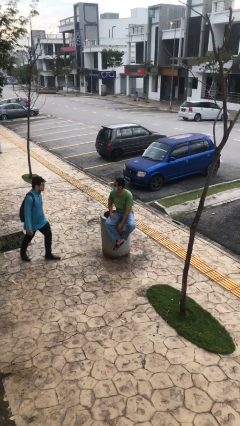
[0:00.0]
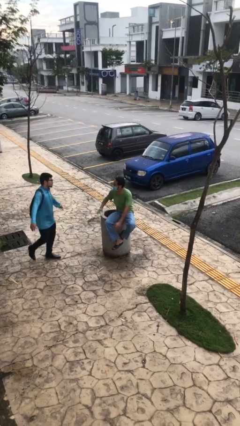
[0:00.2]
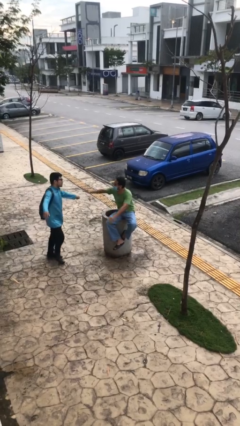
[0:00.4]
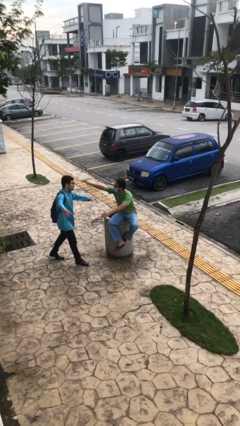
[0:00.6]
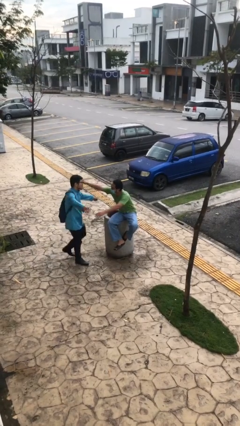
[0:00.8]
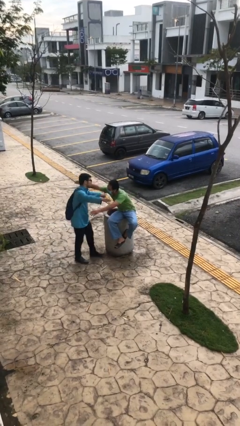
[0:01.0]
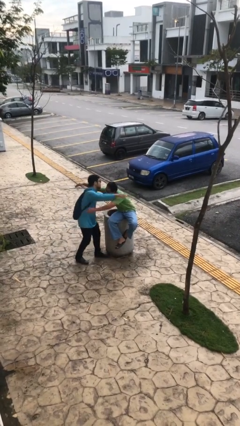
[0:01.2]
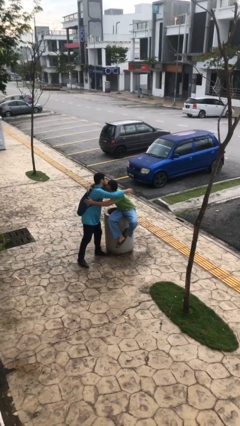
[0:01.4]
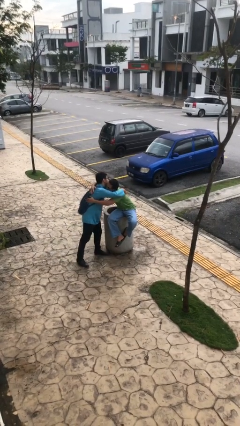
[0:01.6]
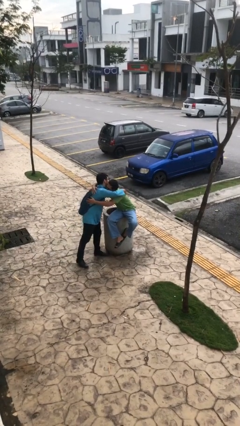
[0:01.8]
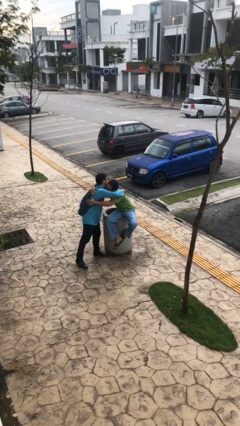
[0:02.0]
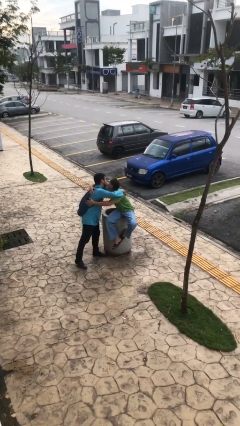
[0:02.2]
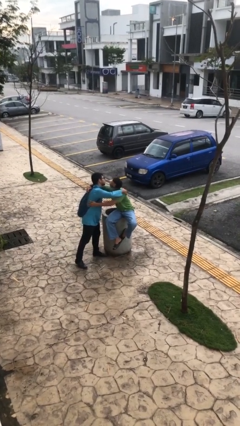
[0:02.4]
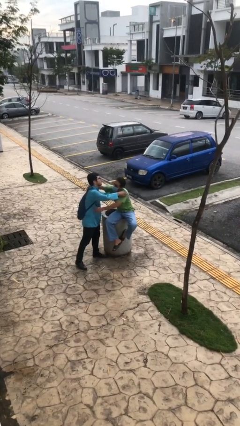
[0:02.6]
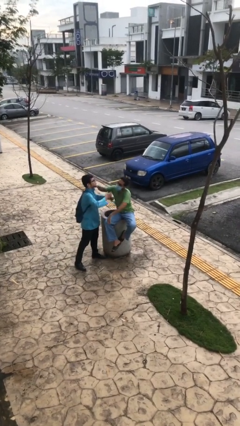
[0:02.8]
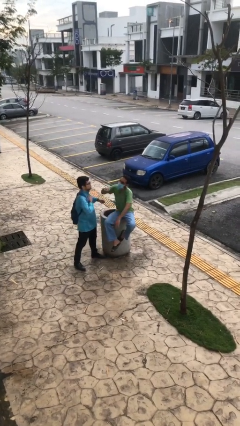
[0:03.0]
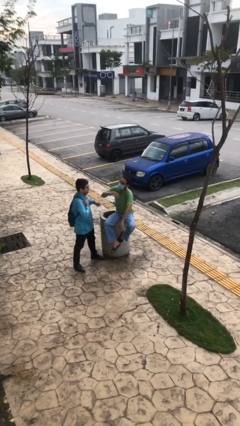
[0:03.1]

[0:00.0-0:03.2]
person embraces person

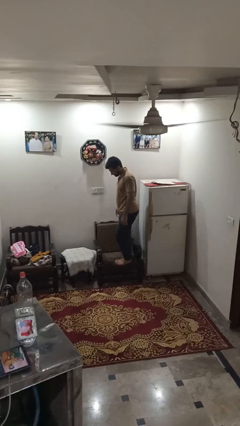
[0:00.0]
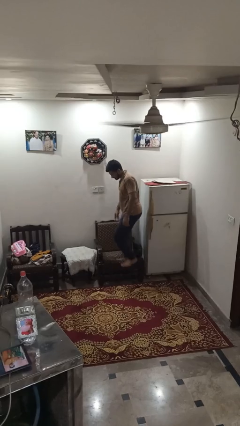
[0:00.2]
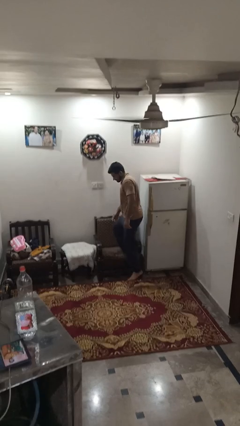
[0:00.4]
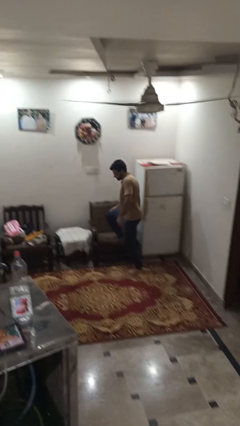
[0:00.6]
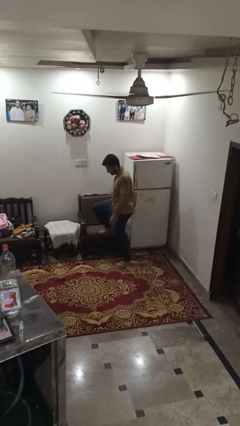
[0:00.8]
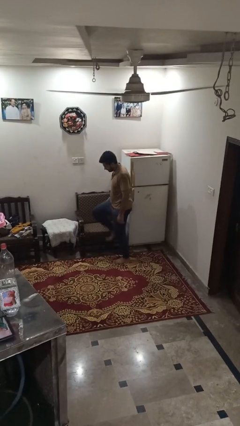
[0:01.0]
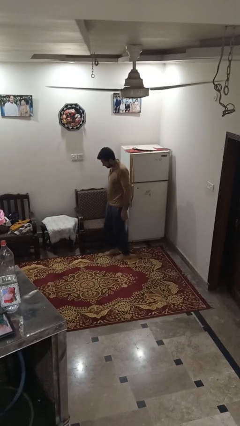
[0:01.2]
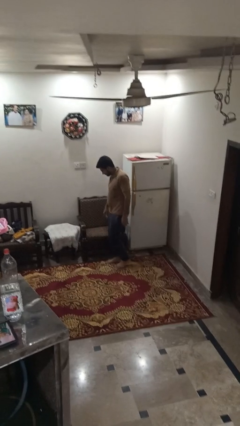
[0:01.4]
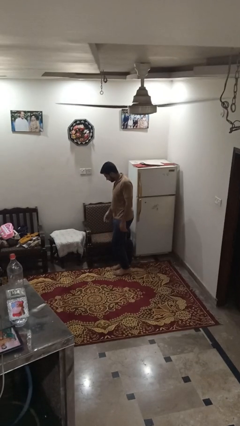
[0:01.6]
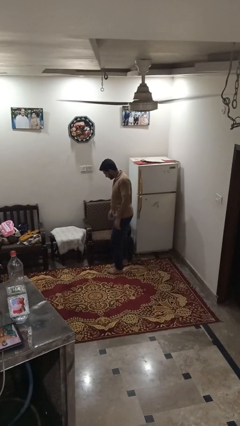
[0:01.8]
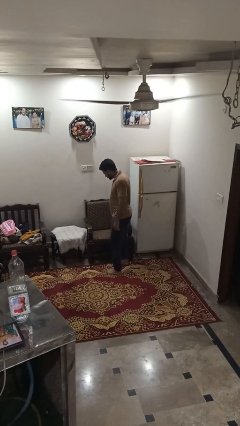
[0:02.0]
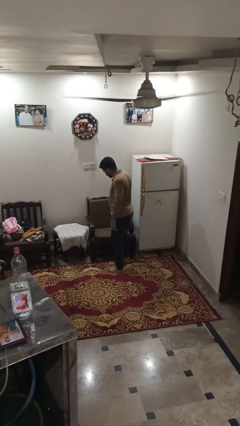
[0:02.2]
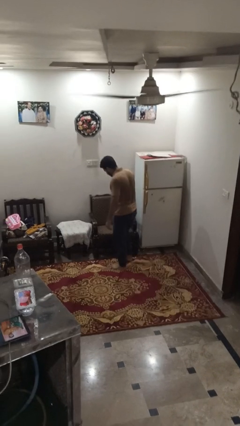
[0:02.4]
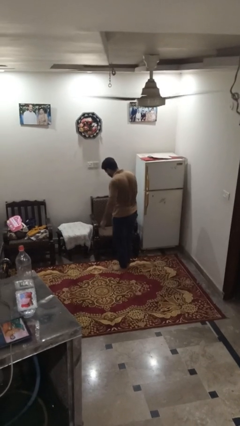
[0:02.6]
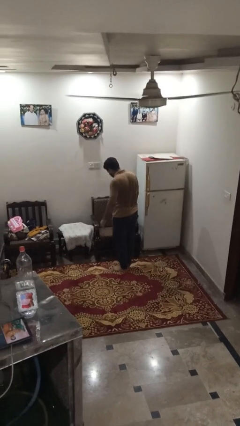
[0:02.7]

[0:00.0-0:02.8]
person climbs off couch

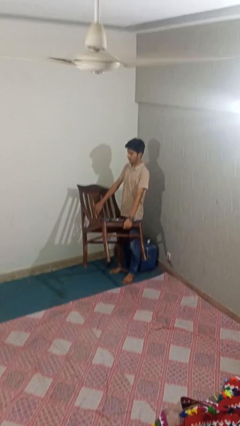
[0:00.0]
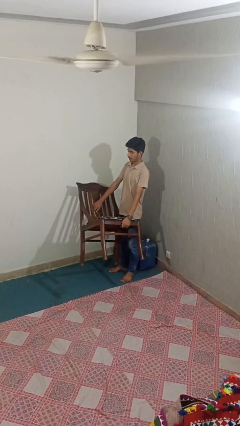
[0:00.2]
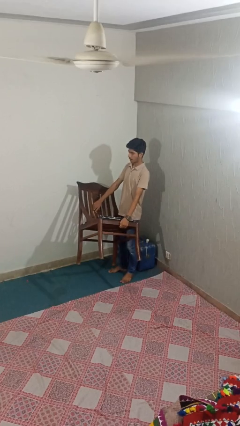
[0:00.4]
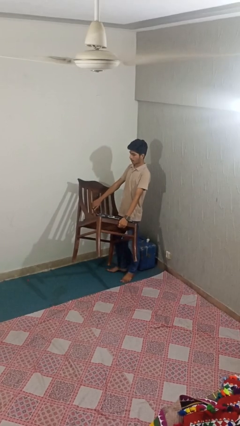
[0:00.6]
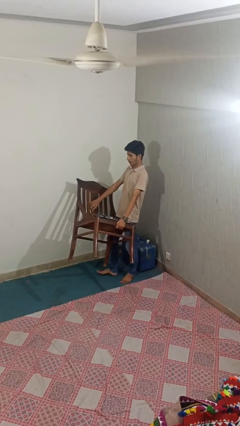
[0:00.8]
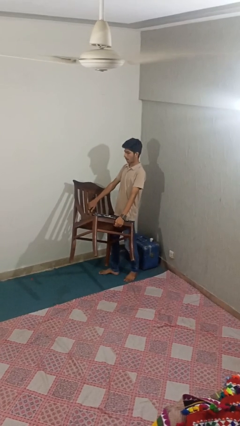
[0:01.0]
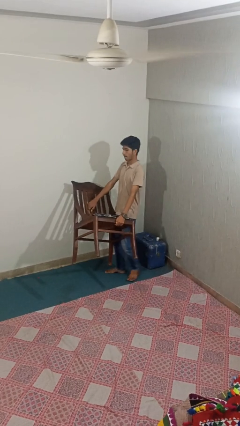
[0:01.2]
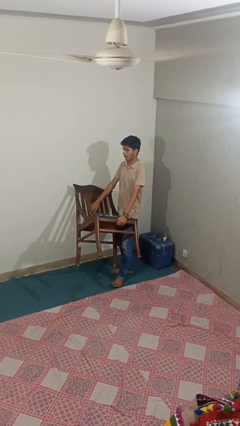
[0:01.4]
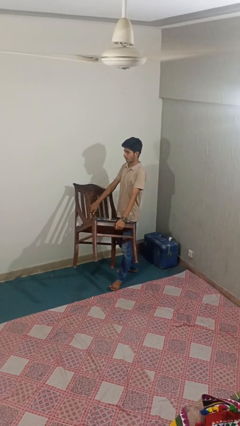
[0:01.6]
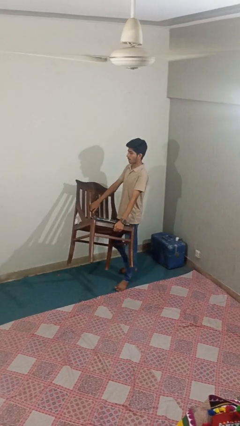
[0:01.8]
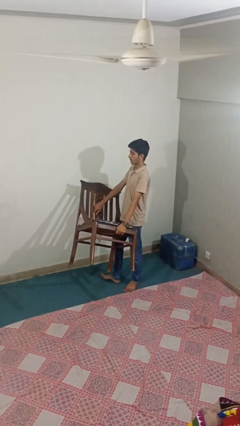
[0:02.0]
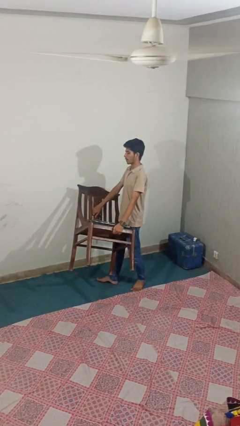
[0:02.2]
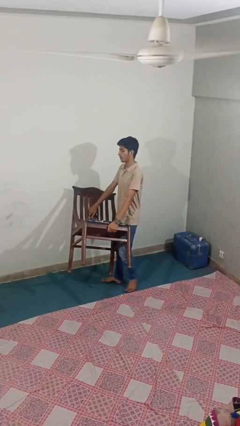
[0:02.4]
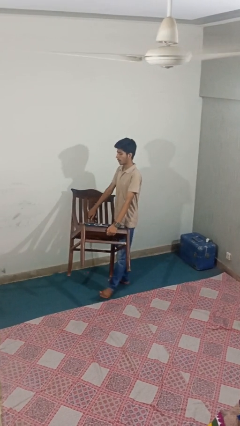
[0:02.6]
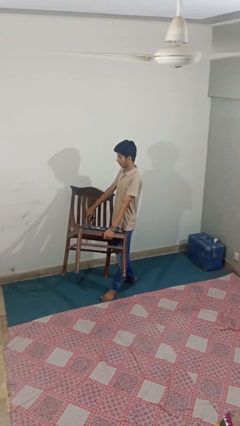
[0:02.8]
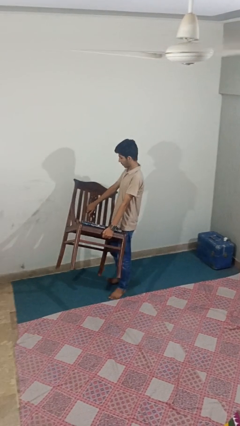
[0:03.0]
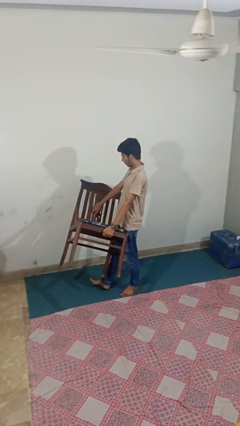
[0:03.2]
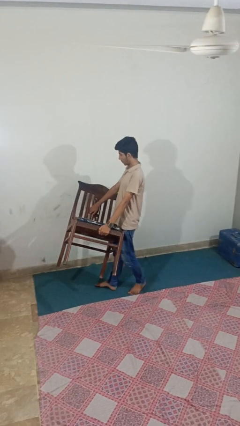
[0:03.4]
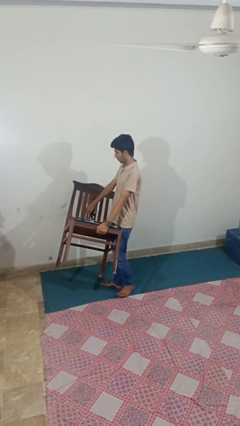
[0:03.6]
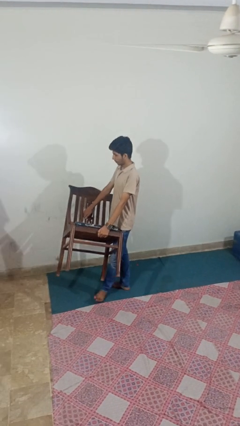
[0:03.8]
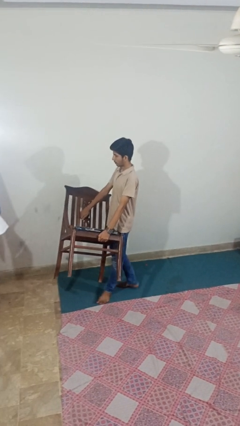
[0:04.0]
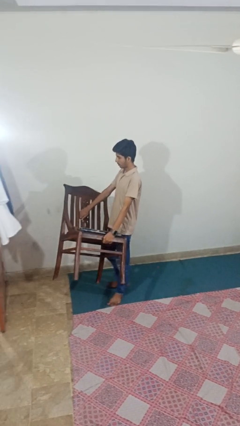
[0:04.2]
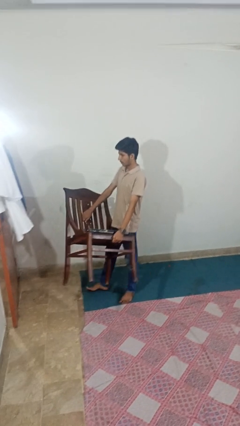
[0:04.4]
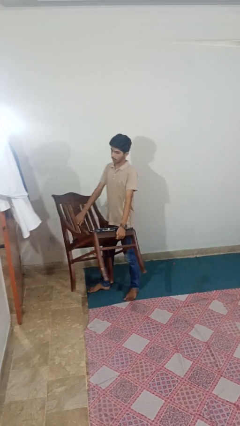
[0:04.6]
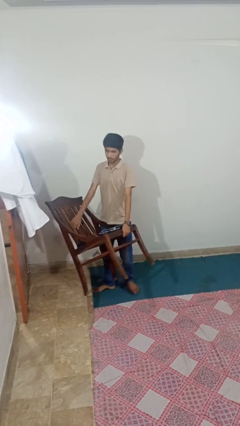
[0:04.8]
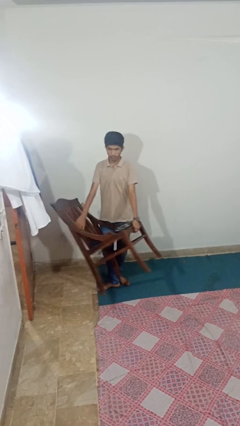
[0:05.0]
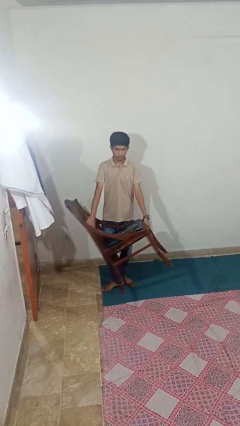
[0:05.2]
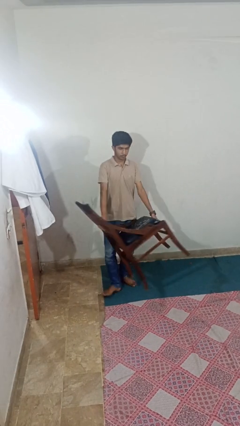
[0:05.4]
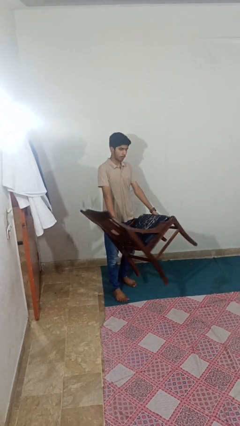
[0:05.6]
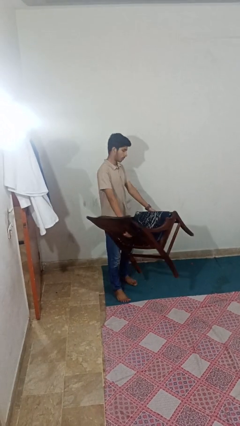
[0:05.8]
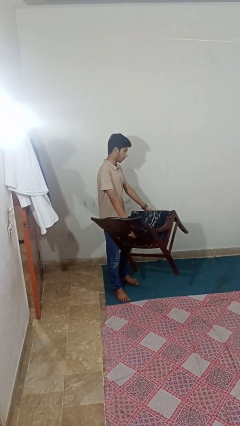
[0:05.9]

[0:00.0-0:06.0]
person carries furniture

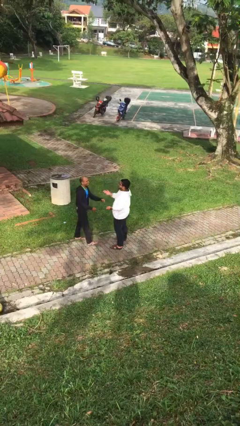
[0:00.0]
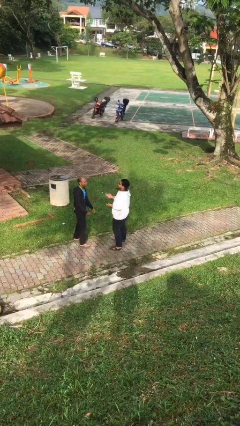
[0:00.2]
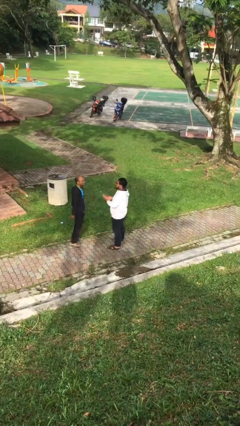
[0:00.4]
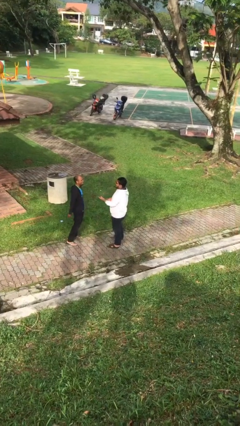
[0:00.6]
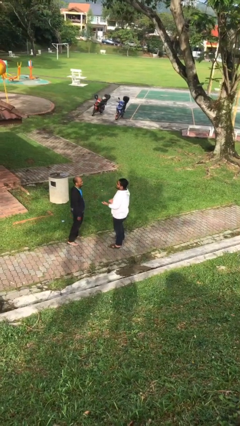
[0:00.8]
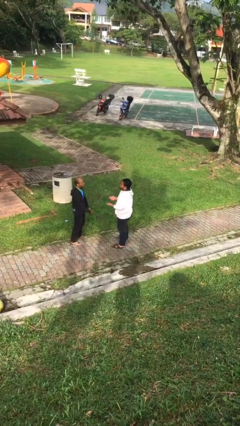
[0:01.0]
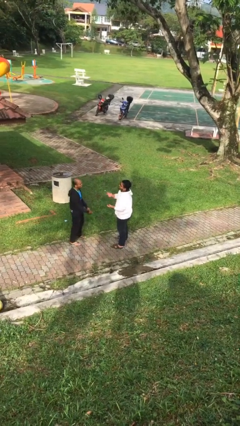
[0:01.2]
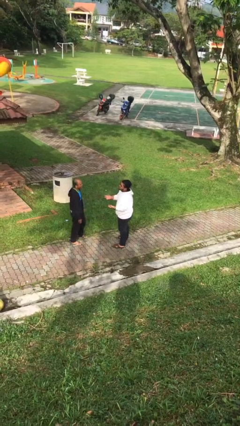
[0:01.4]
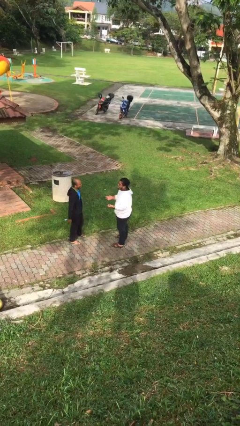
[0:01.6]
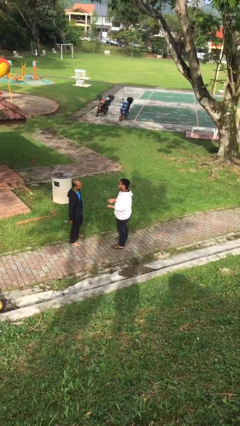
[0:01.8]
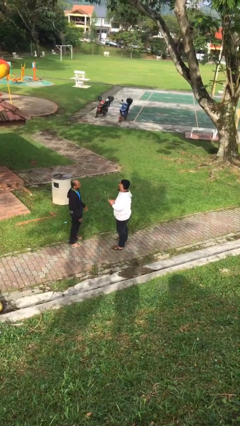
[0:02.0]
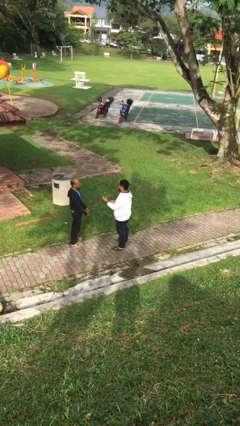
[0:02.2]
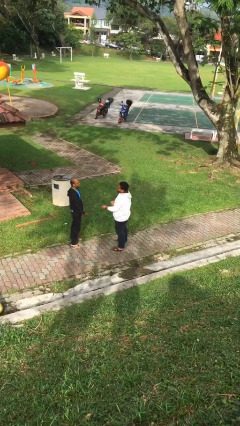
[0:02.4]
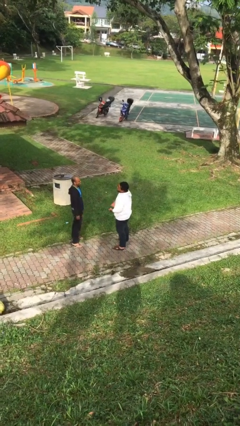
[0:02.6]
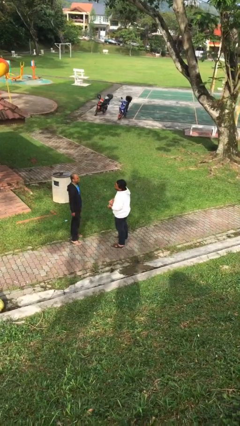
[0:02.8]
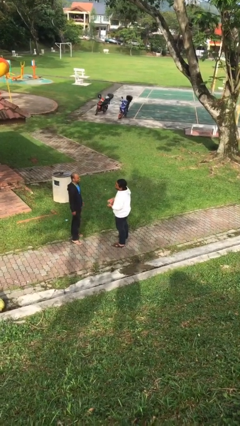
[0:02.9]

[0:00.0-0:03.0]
person talks to person

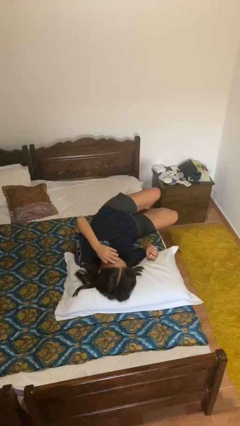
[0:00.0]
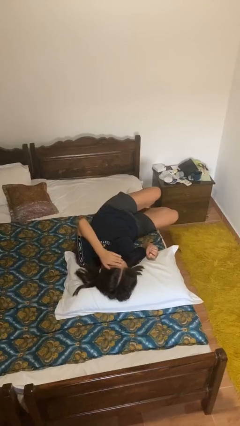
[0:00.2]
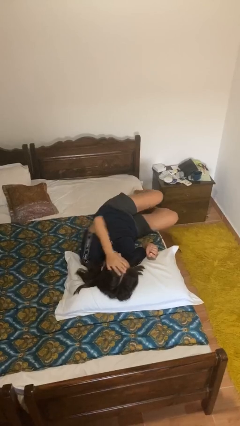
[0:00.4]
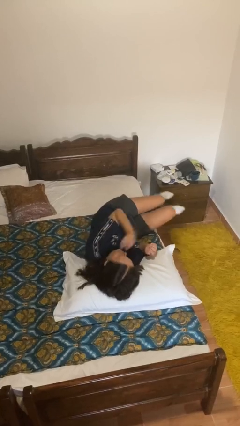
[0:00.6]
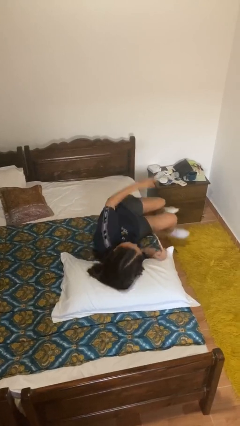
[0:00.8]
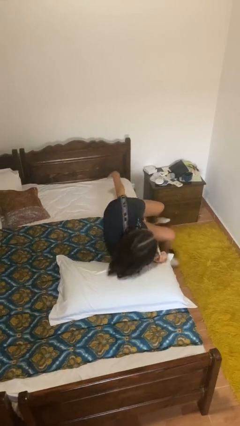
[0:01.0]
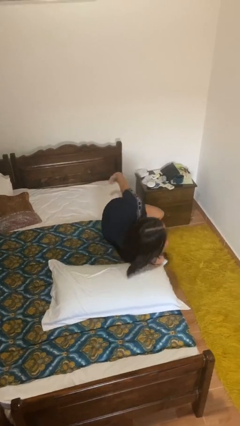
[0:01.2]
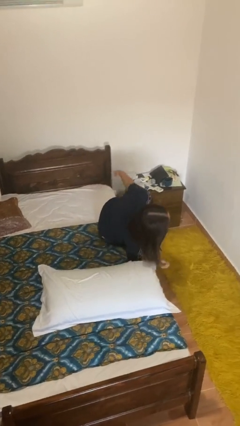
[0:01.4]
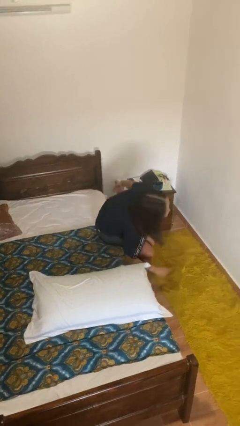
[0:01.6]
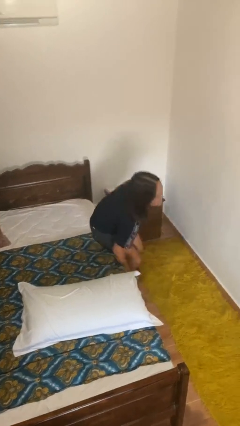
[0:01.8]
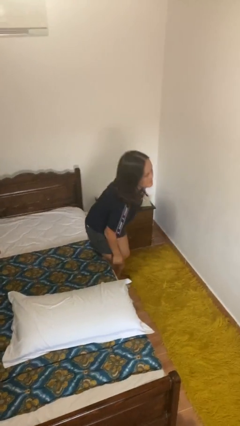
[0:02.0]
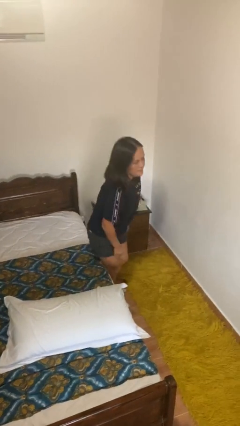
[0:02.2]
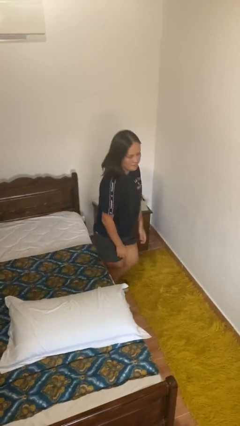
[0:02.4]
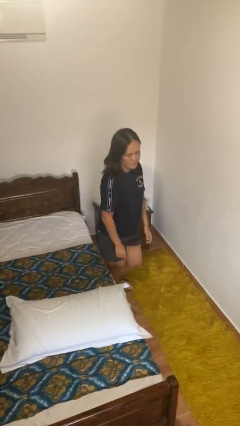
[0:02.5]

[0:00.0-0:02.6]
person stands up
